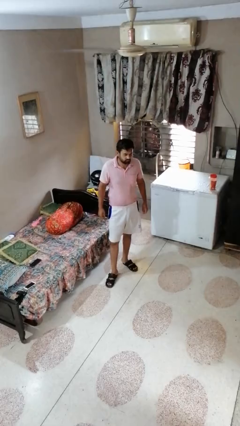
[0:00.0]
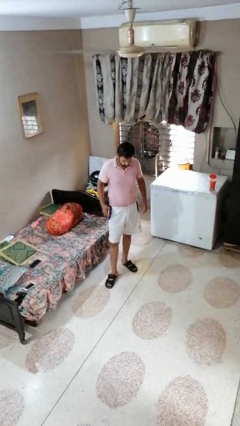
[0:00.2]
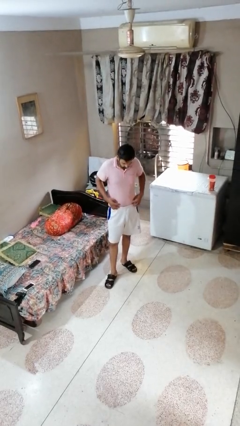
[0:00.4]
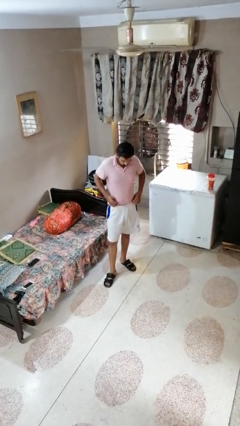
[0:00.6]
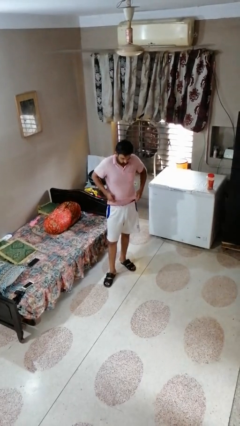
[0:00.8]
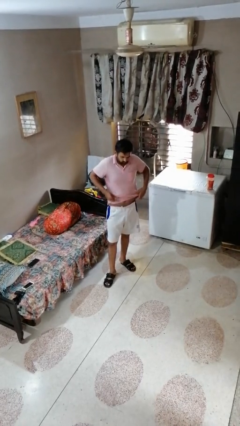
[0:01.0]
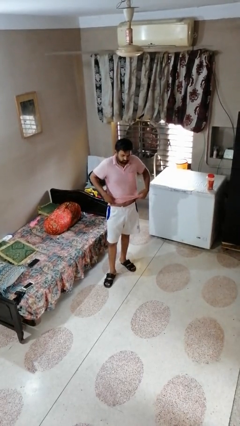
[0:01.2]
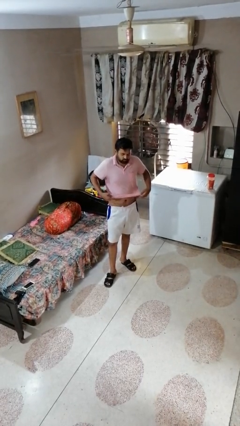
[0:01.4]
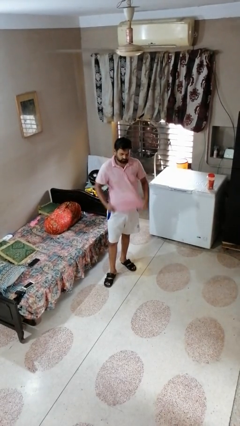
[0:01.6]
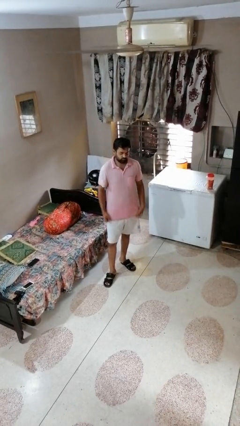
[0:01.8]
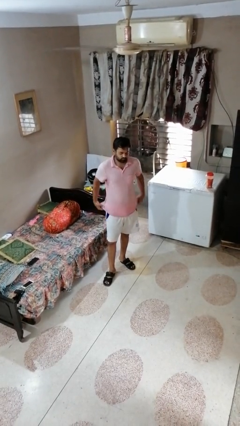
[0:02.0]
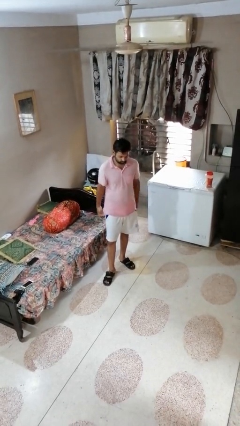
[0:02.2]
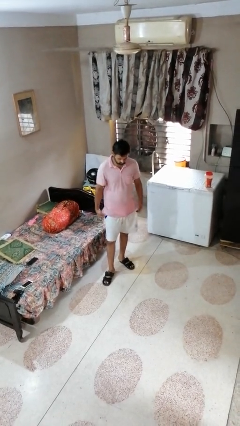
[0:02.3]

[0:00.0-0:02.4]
person untucks shirt

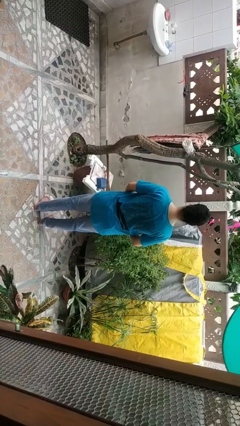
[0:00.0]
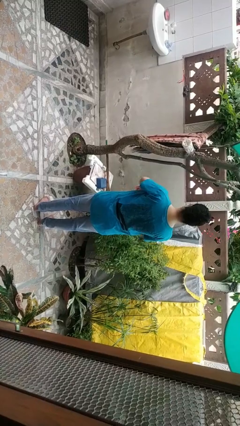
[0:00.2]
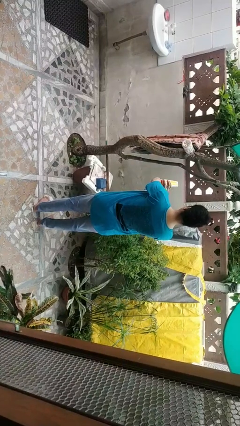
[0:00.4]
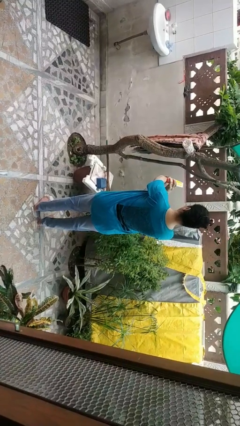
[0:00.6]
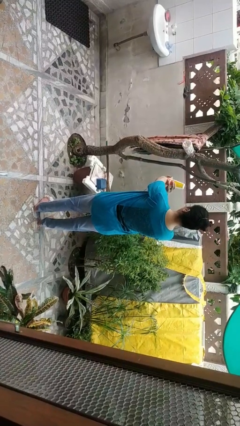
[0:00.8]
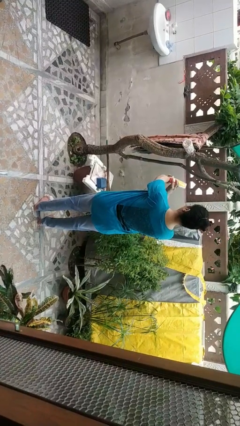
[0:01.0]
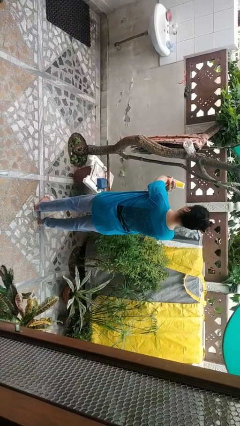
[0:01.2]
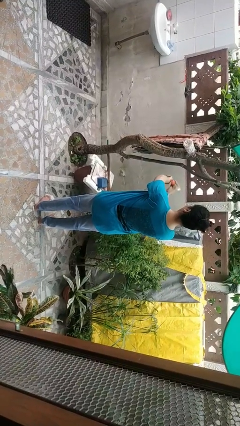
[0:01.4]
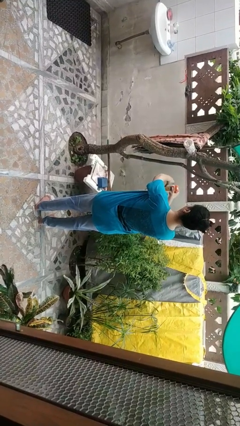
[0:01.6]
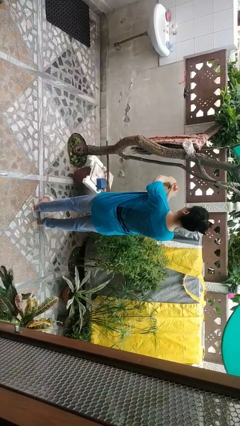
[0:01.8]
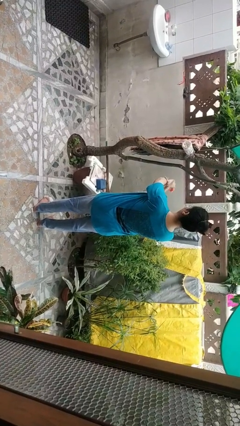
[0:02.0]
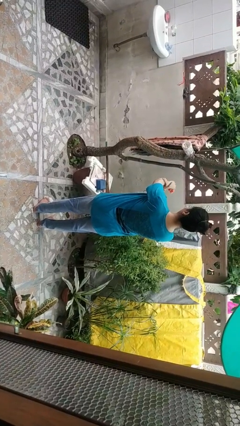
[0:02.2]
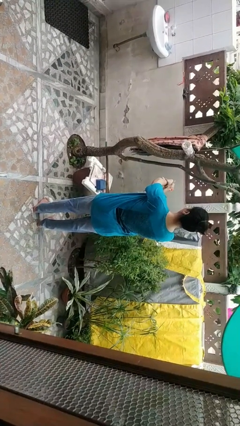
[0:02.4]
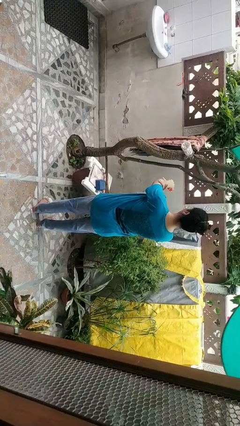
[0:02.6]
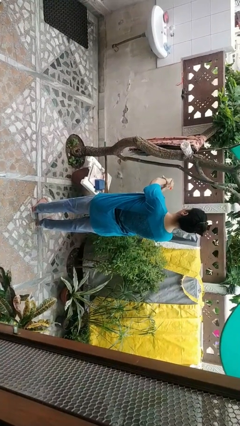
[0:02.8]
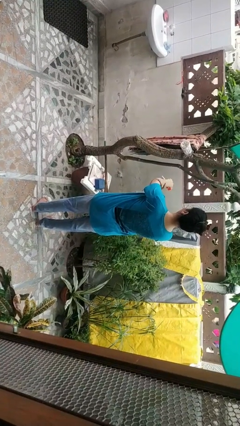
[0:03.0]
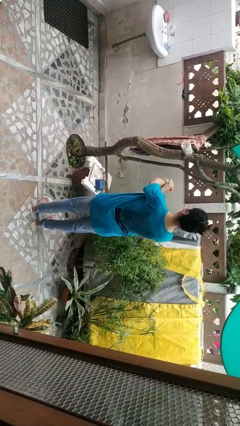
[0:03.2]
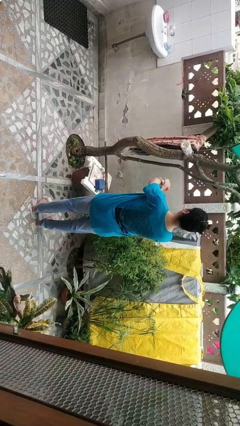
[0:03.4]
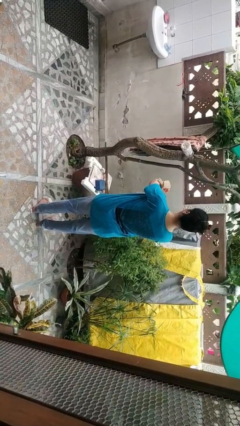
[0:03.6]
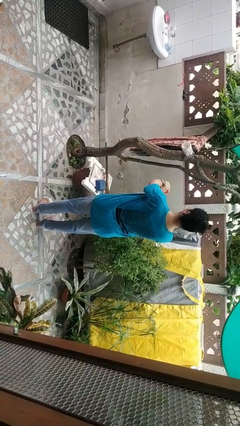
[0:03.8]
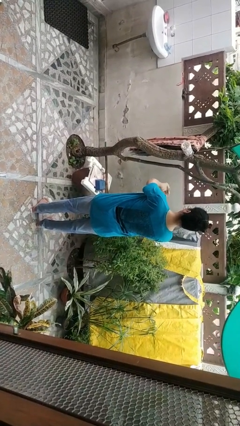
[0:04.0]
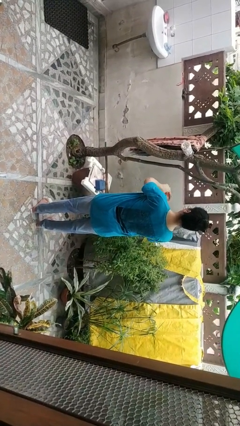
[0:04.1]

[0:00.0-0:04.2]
person applies sunscreen

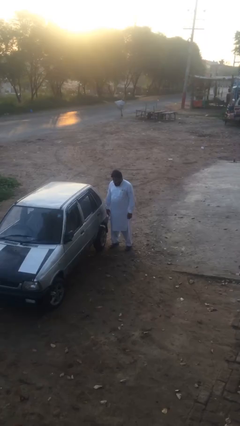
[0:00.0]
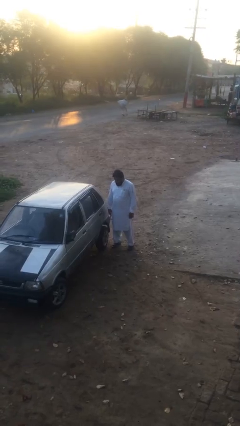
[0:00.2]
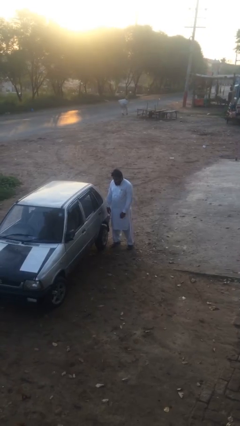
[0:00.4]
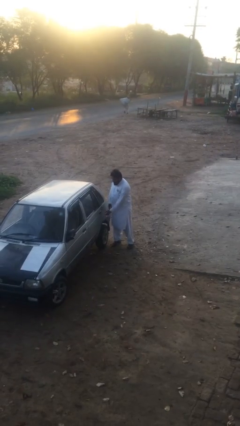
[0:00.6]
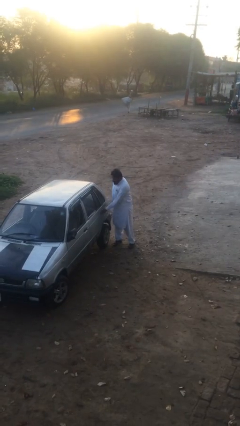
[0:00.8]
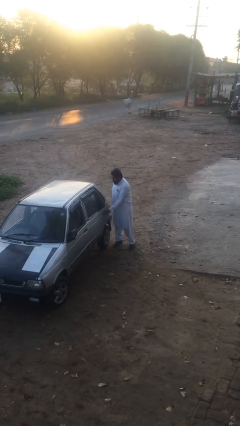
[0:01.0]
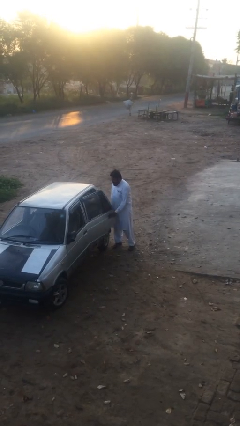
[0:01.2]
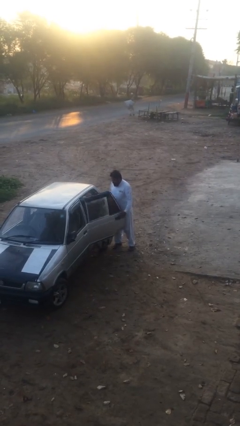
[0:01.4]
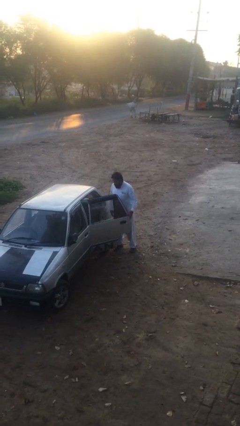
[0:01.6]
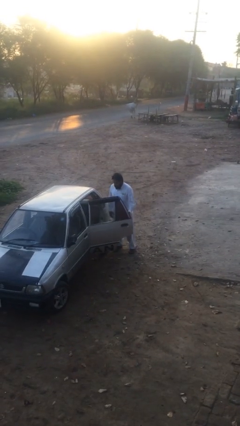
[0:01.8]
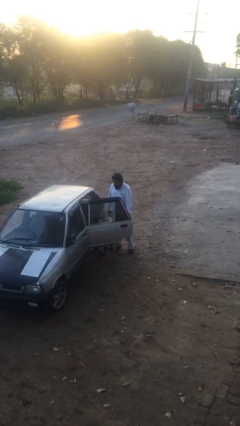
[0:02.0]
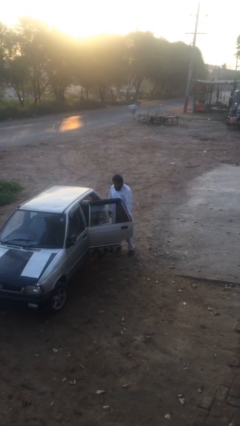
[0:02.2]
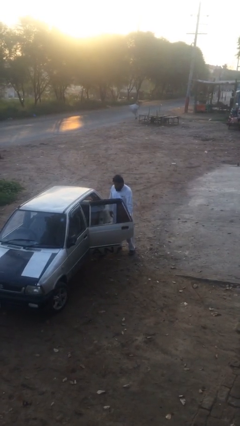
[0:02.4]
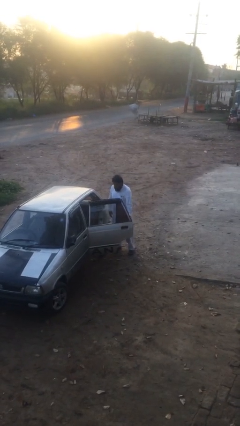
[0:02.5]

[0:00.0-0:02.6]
person opens car door

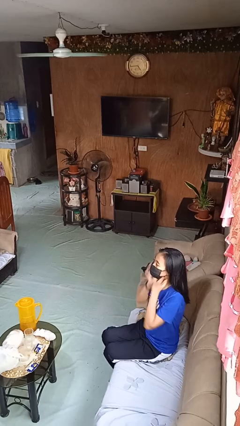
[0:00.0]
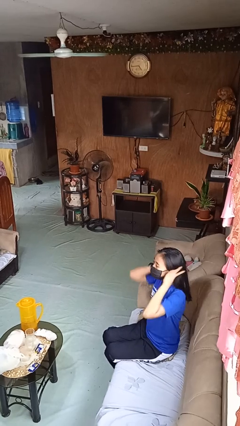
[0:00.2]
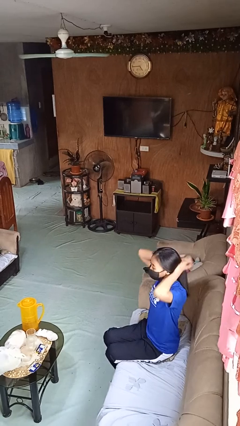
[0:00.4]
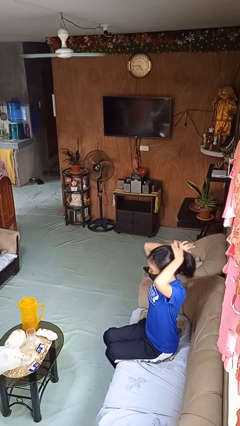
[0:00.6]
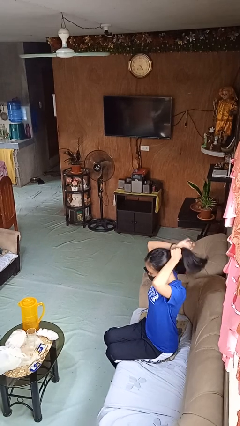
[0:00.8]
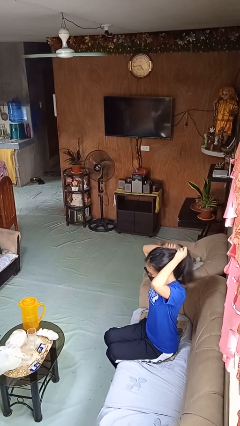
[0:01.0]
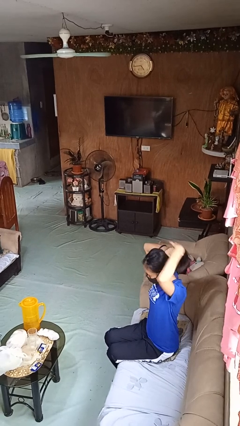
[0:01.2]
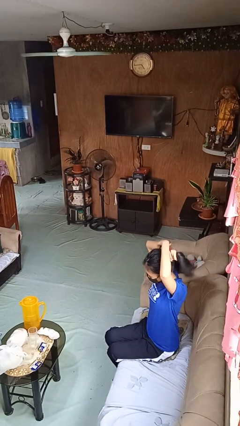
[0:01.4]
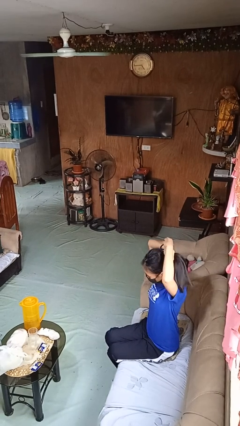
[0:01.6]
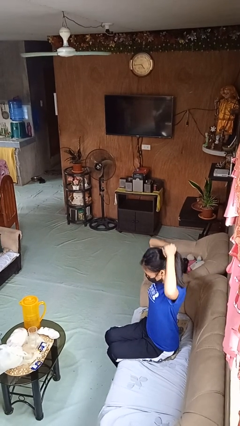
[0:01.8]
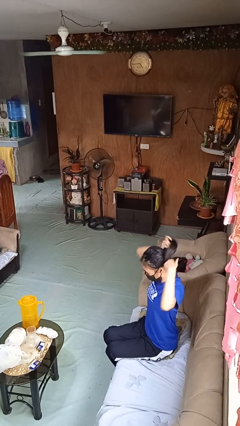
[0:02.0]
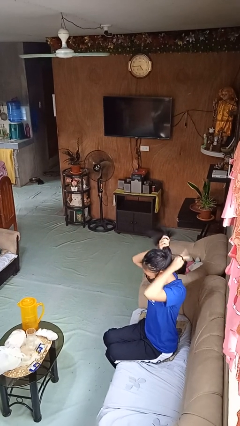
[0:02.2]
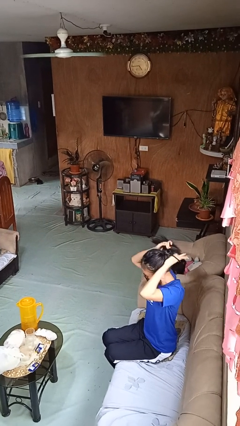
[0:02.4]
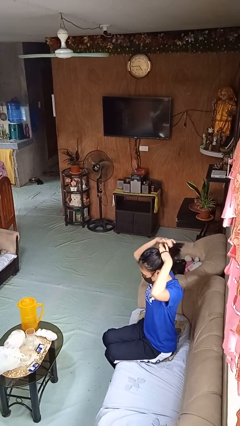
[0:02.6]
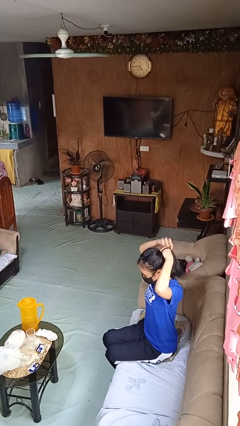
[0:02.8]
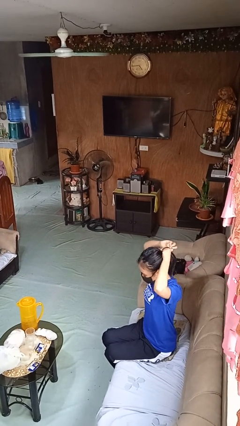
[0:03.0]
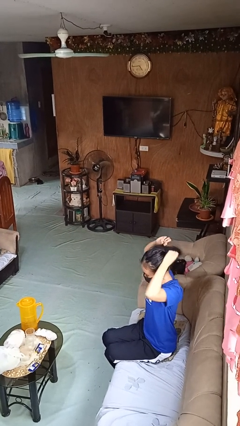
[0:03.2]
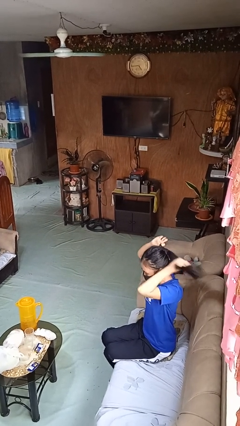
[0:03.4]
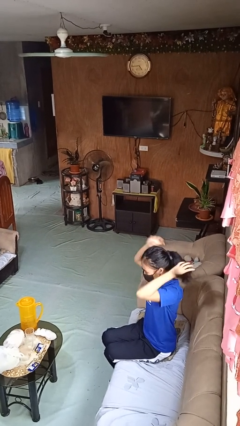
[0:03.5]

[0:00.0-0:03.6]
person puts hair in ponytail

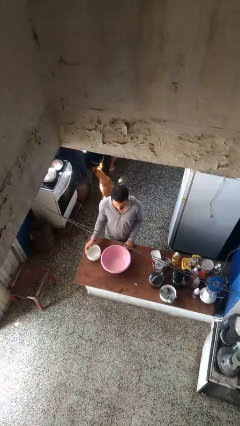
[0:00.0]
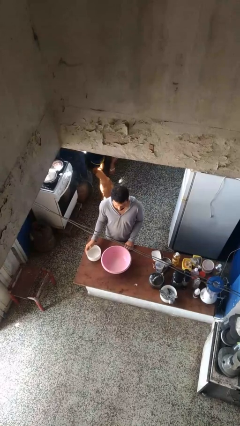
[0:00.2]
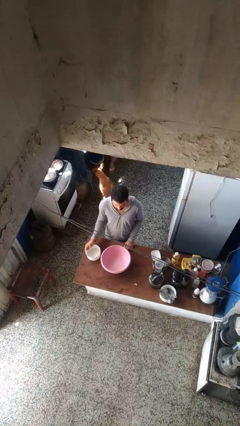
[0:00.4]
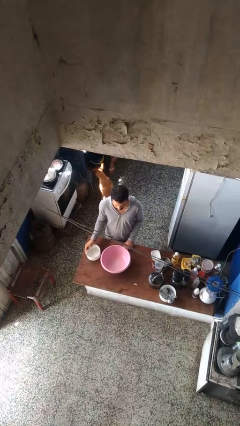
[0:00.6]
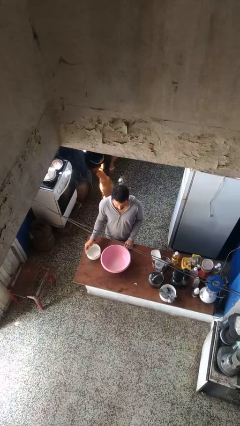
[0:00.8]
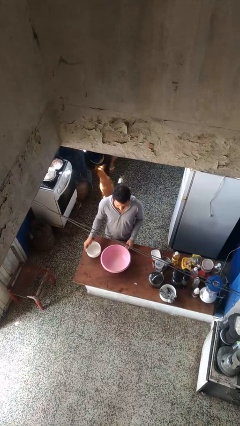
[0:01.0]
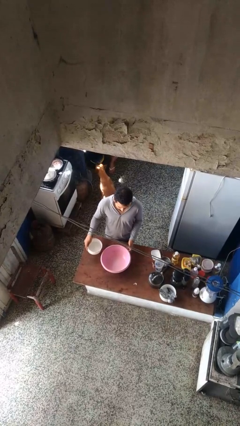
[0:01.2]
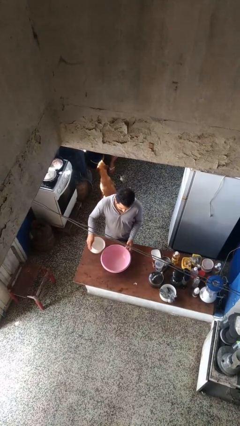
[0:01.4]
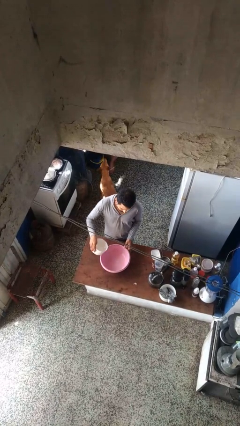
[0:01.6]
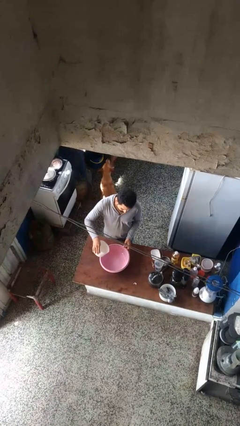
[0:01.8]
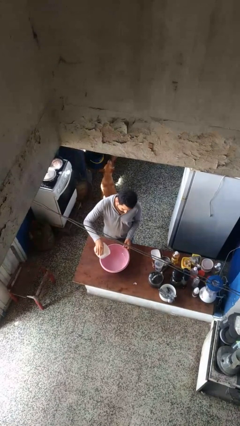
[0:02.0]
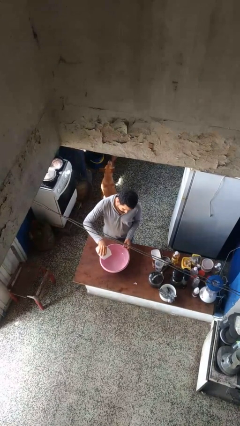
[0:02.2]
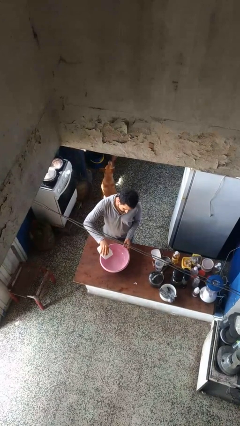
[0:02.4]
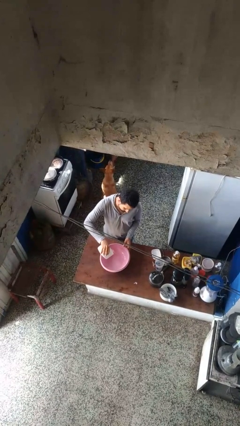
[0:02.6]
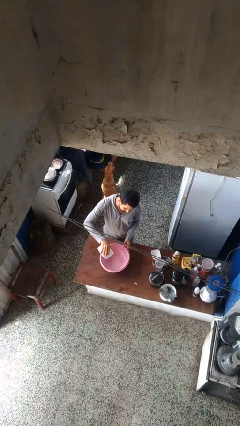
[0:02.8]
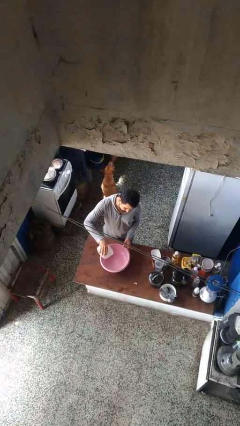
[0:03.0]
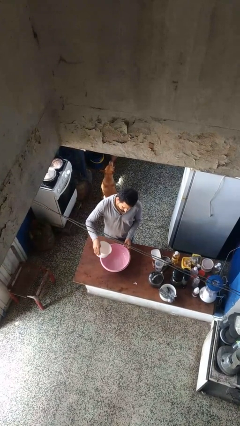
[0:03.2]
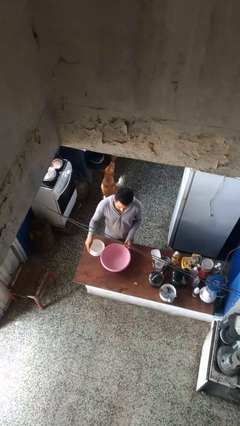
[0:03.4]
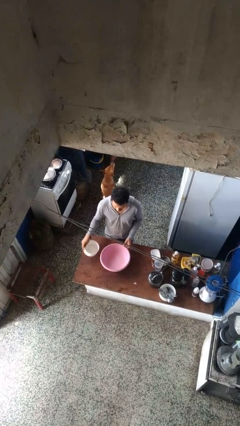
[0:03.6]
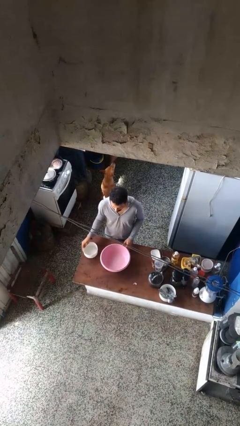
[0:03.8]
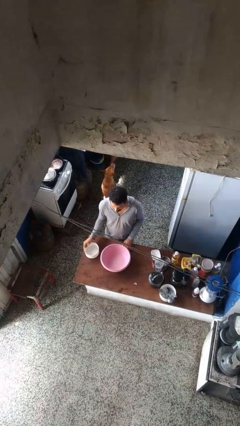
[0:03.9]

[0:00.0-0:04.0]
person pours into bowl

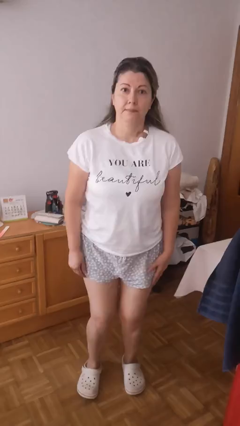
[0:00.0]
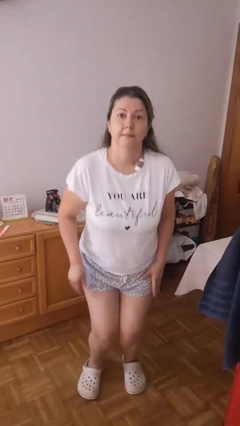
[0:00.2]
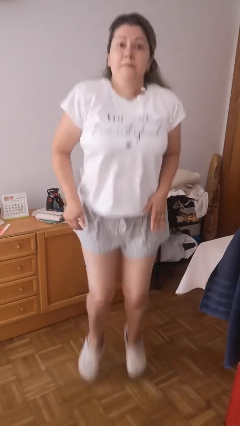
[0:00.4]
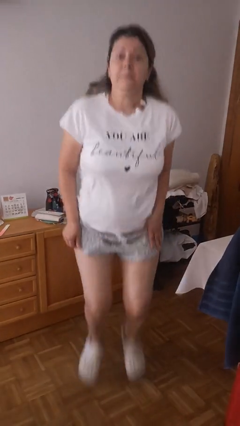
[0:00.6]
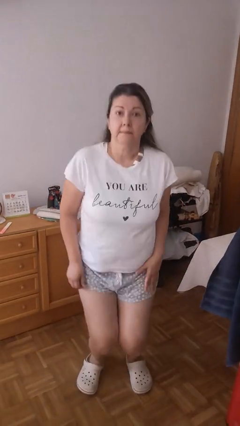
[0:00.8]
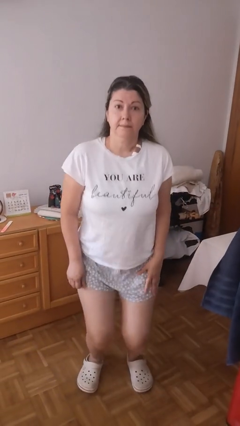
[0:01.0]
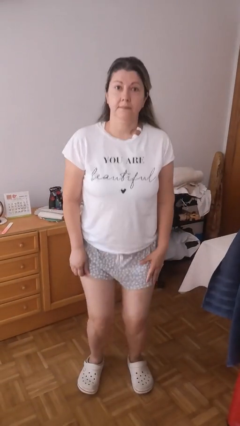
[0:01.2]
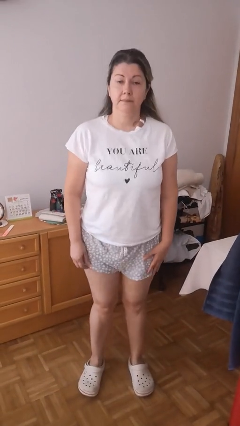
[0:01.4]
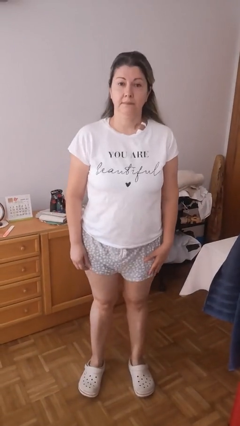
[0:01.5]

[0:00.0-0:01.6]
person jumps
